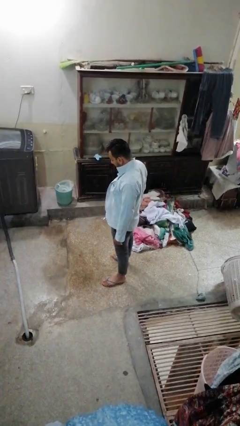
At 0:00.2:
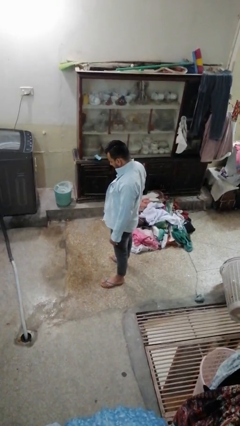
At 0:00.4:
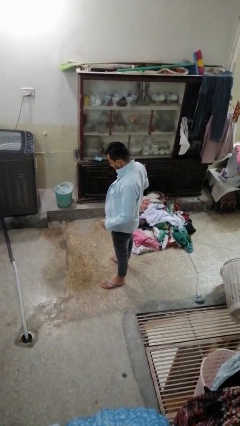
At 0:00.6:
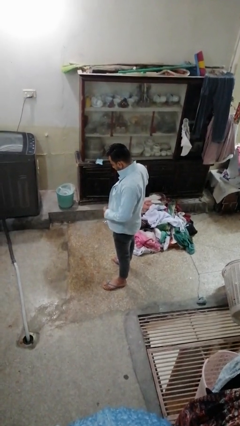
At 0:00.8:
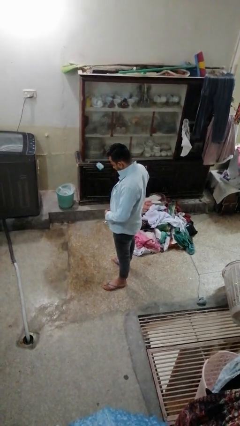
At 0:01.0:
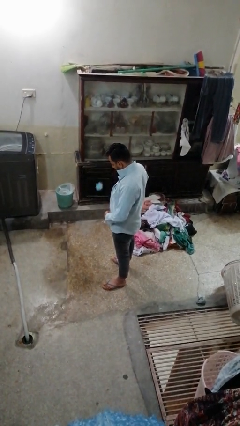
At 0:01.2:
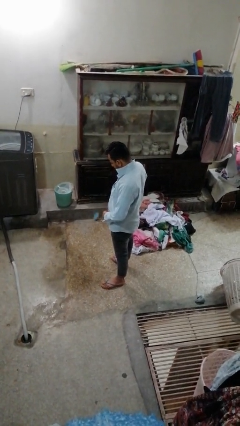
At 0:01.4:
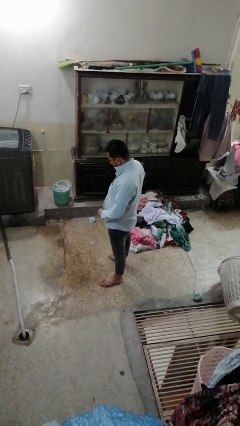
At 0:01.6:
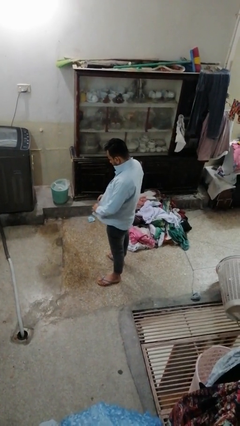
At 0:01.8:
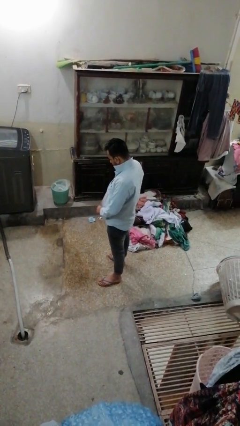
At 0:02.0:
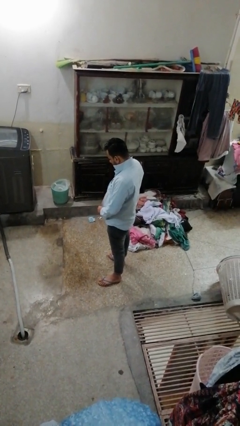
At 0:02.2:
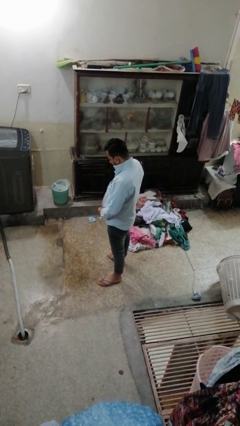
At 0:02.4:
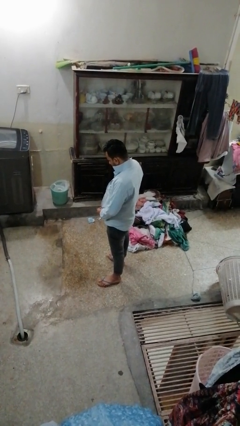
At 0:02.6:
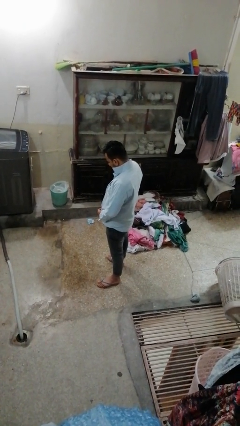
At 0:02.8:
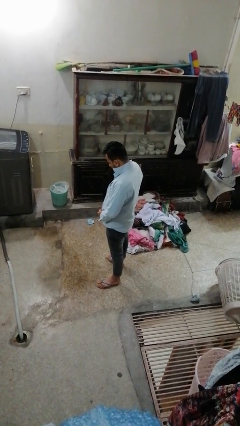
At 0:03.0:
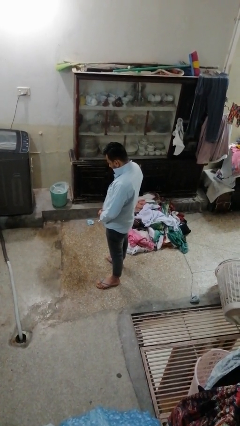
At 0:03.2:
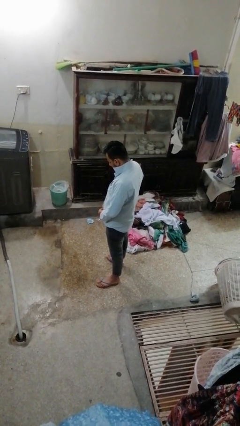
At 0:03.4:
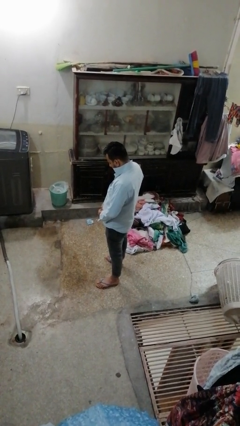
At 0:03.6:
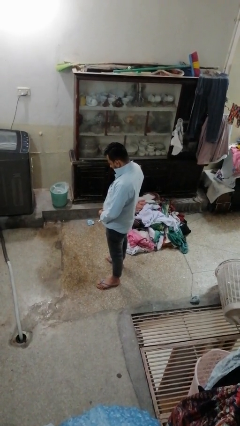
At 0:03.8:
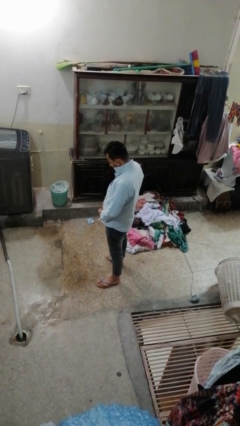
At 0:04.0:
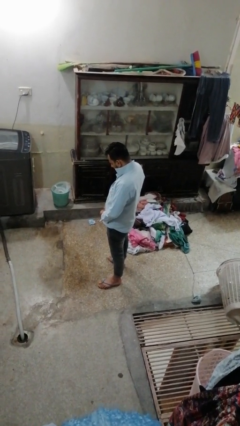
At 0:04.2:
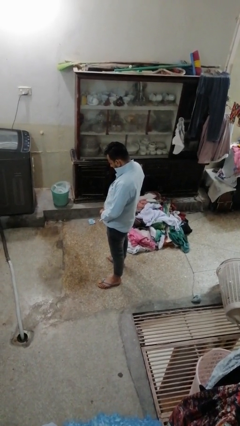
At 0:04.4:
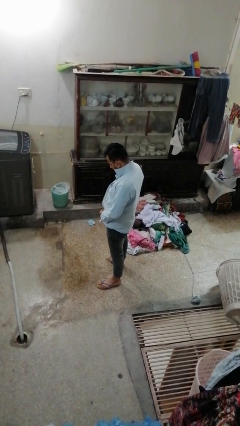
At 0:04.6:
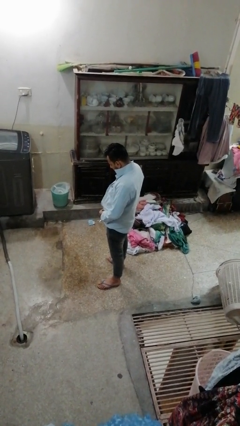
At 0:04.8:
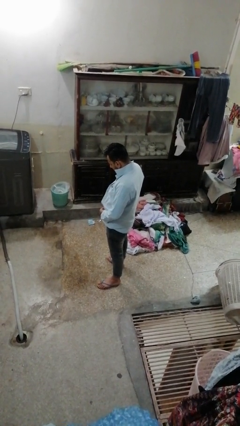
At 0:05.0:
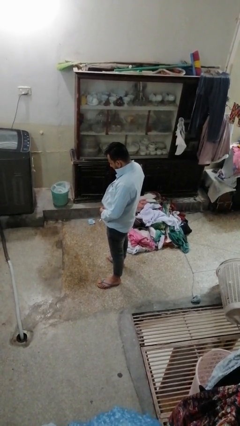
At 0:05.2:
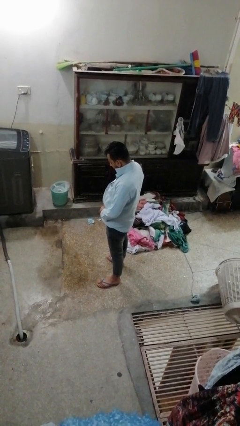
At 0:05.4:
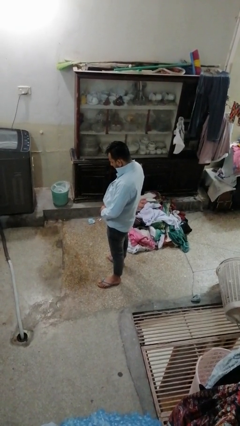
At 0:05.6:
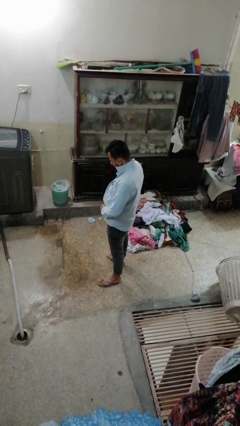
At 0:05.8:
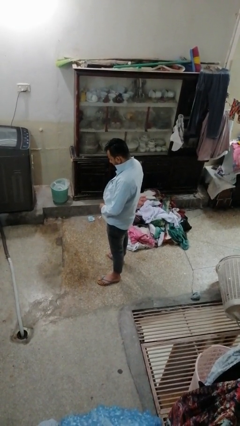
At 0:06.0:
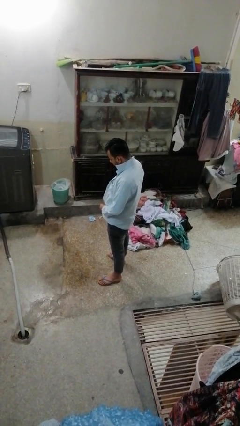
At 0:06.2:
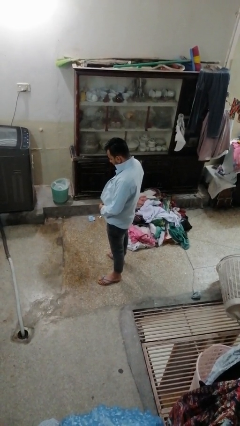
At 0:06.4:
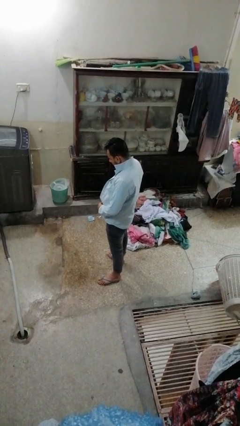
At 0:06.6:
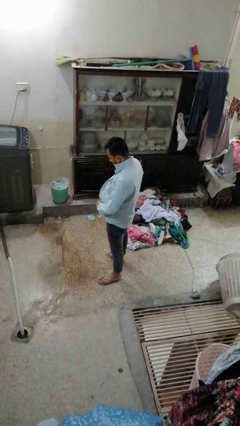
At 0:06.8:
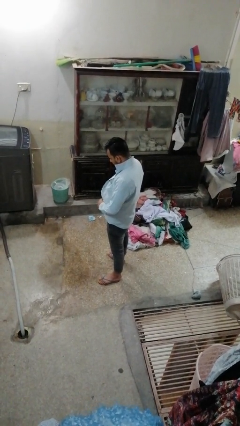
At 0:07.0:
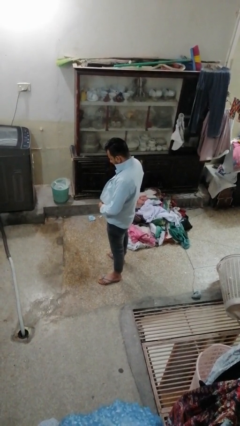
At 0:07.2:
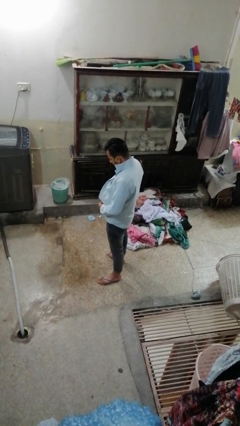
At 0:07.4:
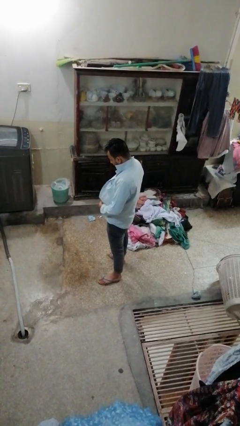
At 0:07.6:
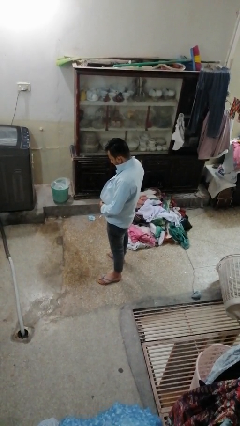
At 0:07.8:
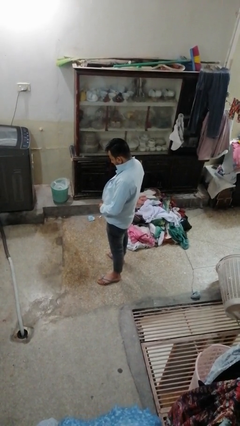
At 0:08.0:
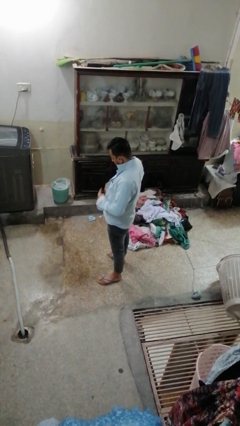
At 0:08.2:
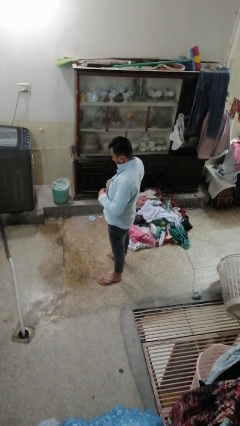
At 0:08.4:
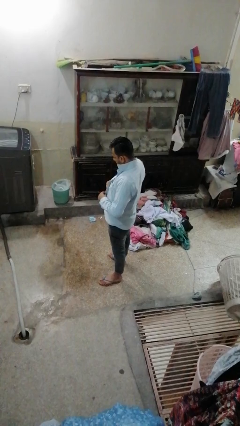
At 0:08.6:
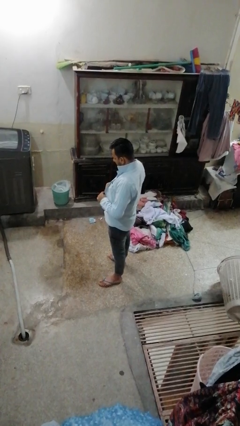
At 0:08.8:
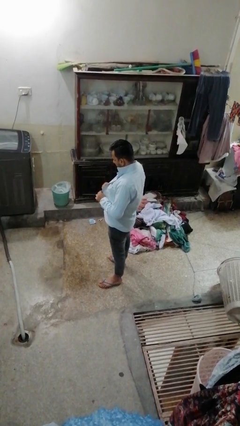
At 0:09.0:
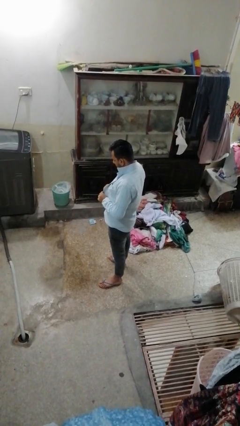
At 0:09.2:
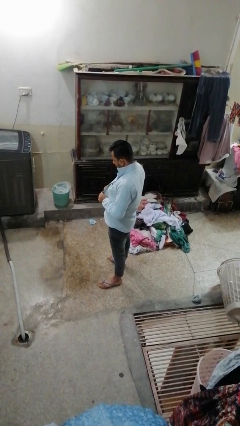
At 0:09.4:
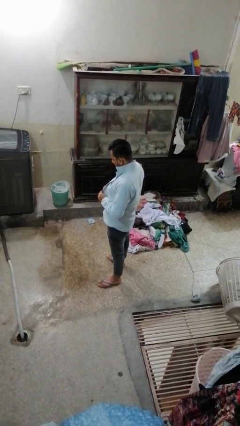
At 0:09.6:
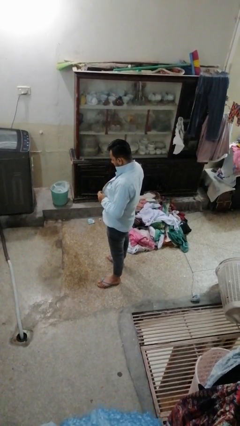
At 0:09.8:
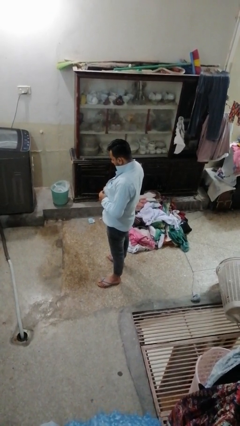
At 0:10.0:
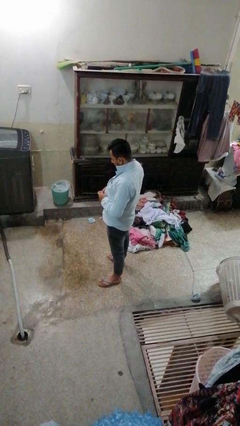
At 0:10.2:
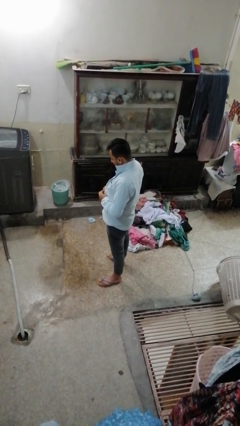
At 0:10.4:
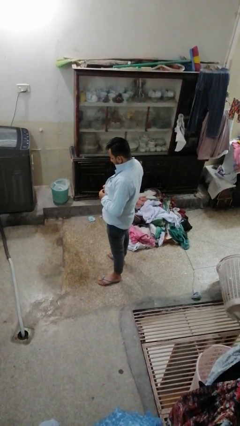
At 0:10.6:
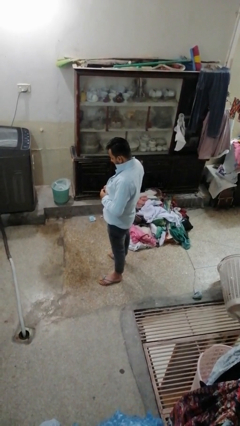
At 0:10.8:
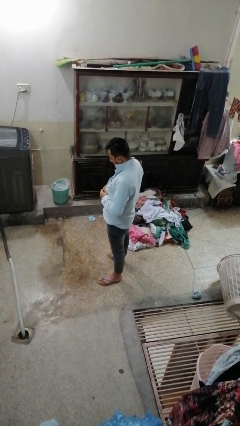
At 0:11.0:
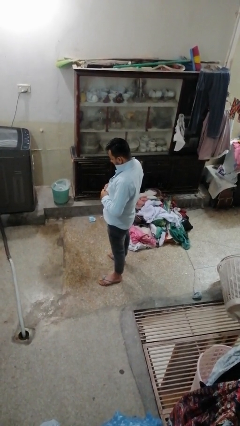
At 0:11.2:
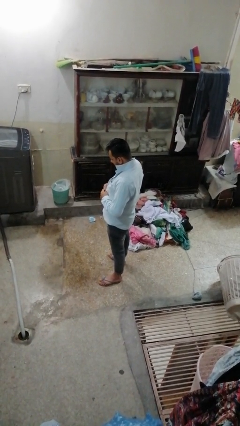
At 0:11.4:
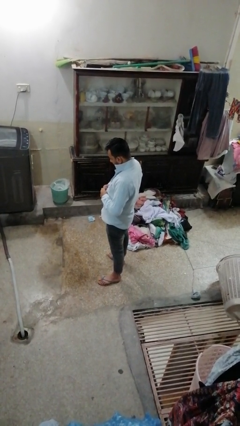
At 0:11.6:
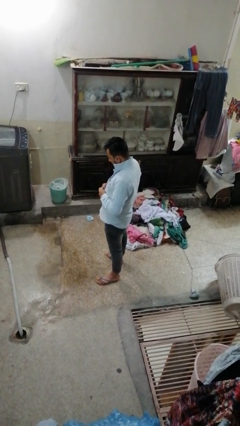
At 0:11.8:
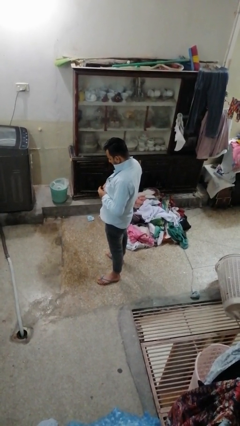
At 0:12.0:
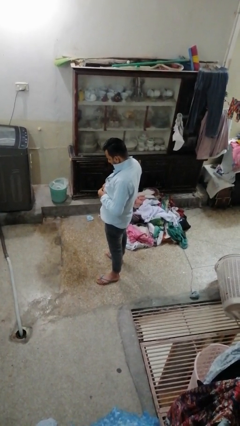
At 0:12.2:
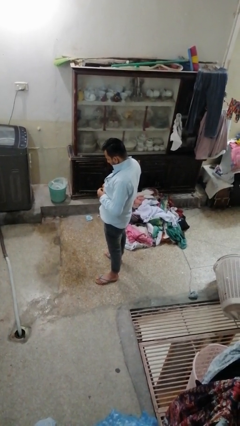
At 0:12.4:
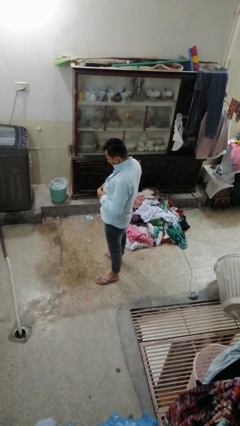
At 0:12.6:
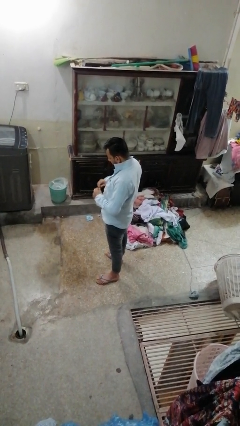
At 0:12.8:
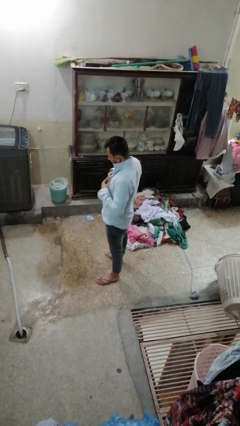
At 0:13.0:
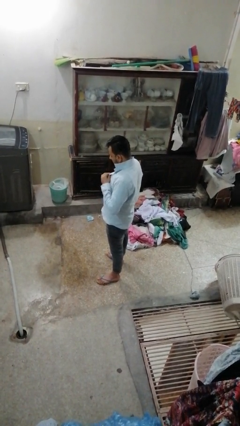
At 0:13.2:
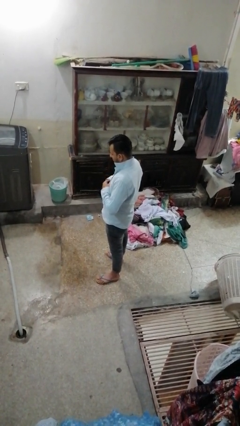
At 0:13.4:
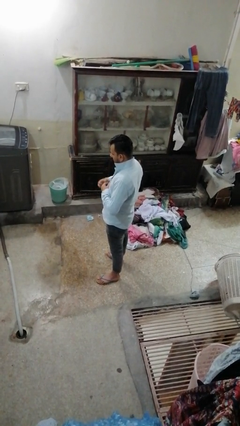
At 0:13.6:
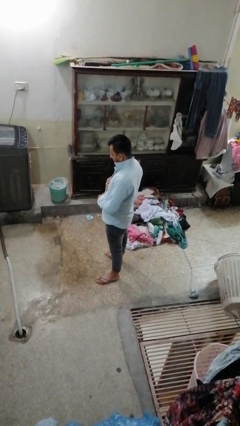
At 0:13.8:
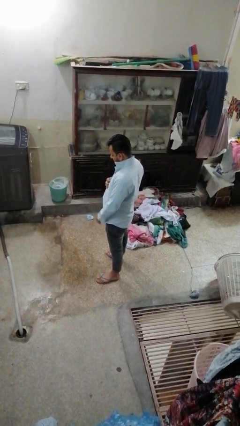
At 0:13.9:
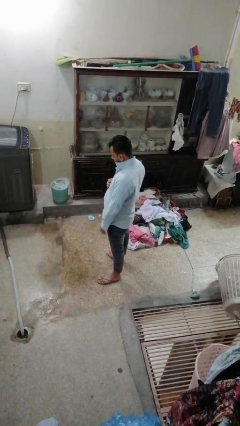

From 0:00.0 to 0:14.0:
person buttons shirt

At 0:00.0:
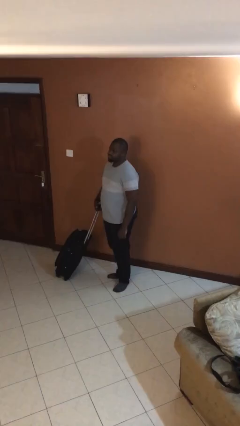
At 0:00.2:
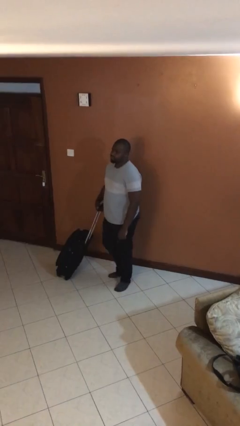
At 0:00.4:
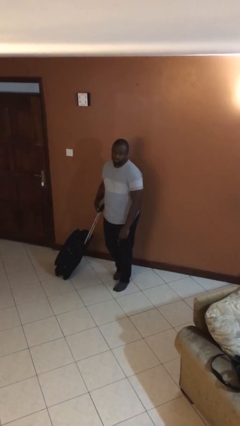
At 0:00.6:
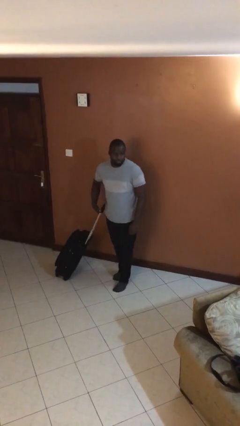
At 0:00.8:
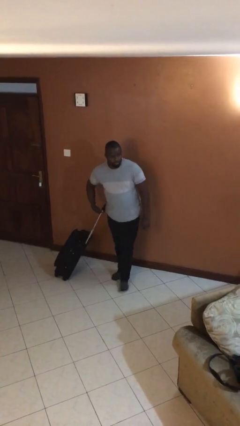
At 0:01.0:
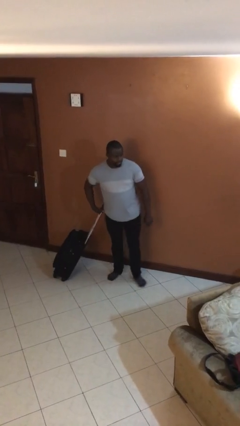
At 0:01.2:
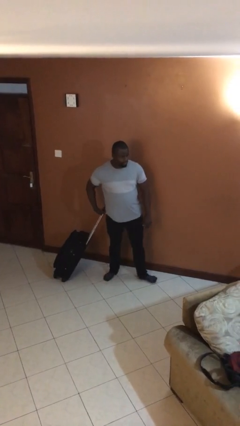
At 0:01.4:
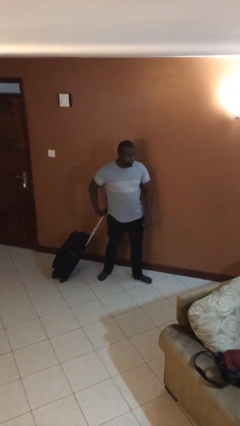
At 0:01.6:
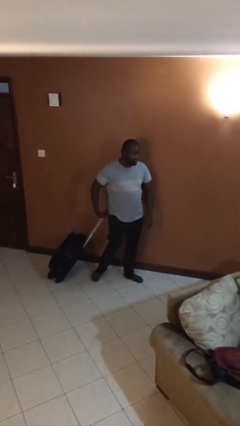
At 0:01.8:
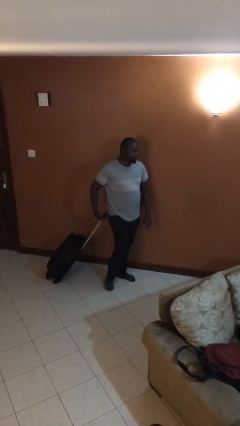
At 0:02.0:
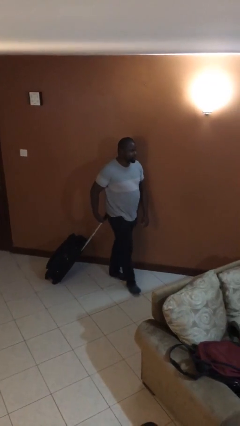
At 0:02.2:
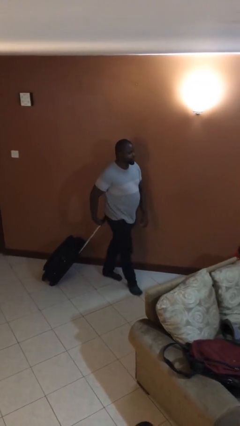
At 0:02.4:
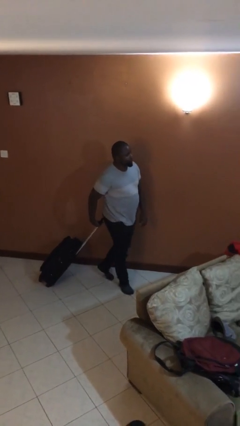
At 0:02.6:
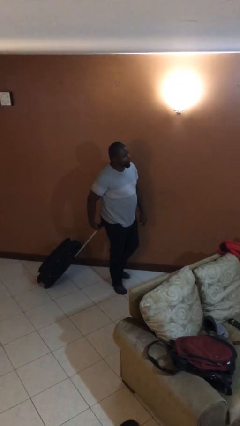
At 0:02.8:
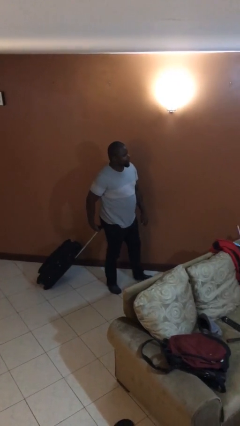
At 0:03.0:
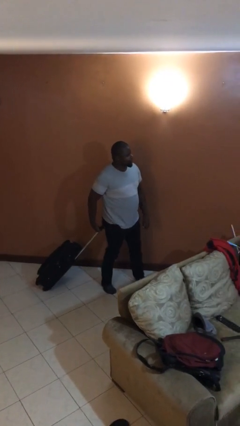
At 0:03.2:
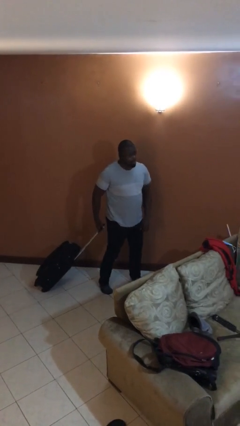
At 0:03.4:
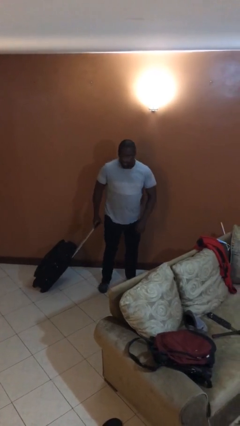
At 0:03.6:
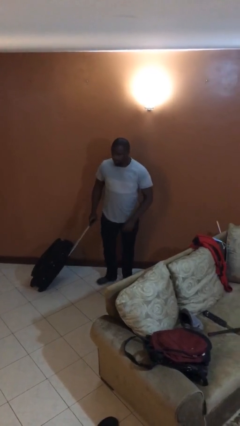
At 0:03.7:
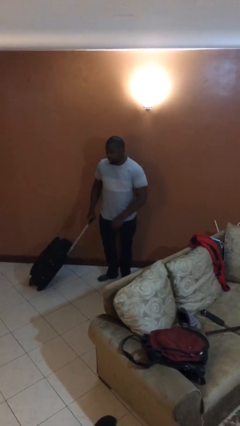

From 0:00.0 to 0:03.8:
person pulls wheeled cart

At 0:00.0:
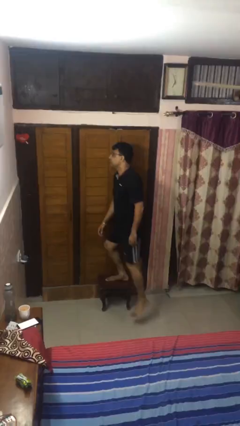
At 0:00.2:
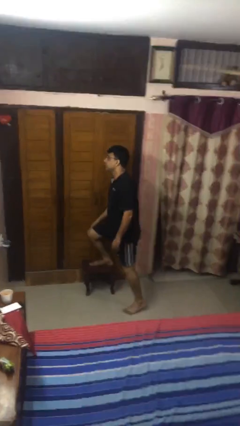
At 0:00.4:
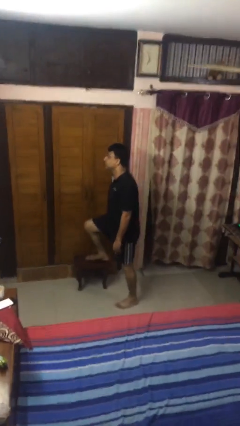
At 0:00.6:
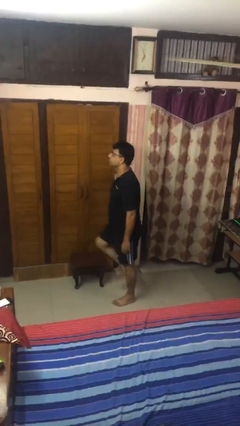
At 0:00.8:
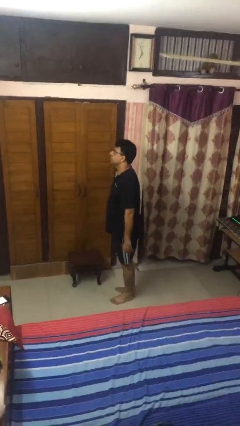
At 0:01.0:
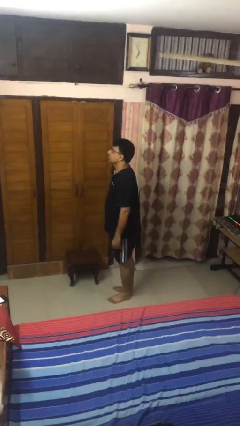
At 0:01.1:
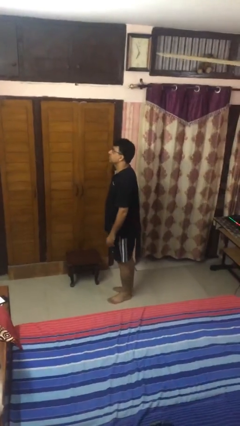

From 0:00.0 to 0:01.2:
person climbs off table
